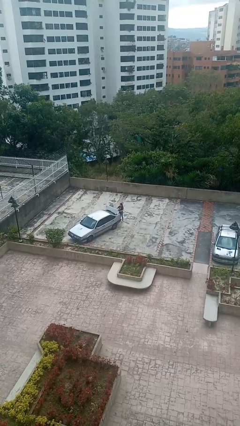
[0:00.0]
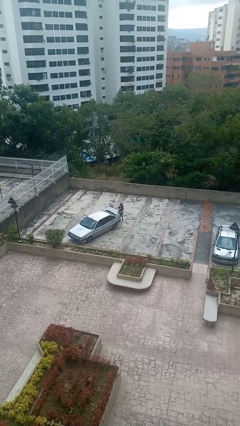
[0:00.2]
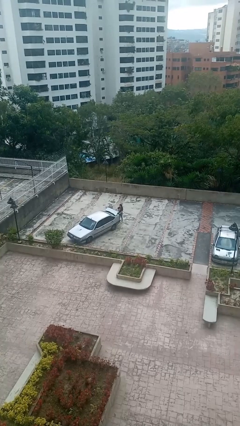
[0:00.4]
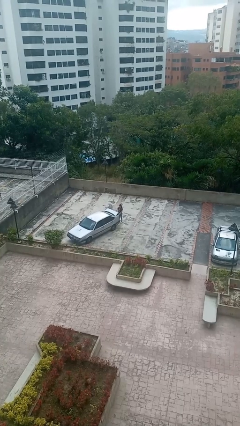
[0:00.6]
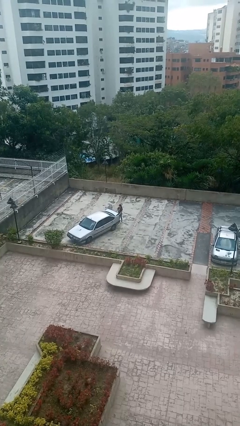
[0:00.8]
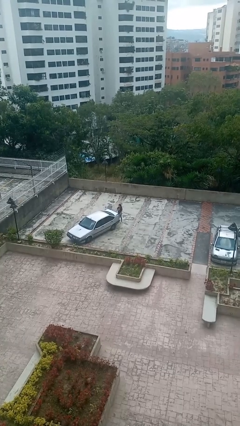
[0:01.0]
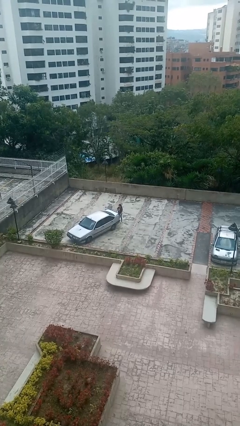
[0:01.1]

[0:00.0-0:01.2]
person closes car trunk

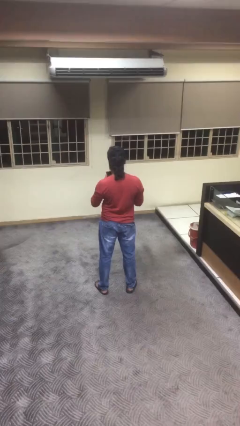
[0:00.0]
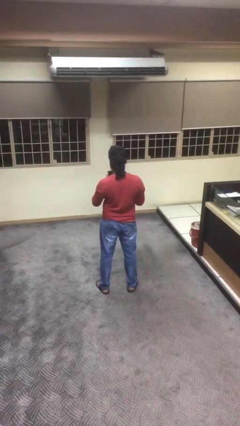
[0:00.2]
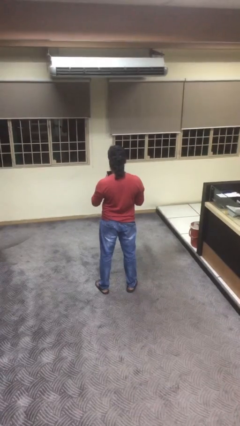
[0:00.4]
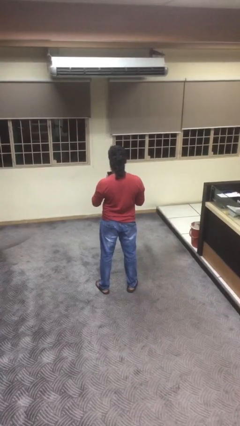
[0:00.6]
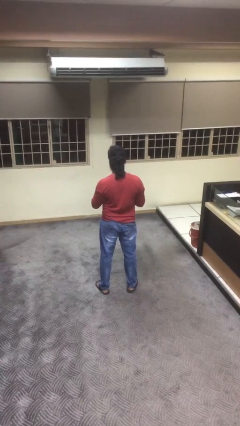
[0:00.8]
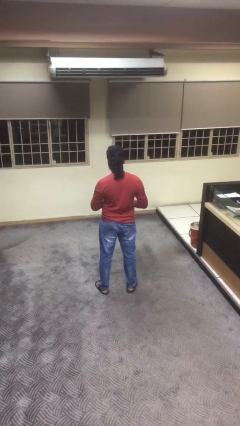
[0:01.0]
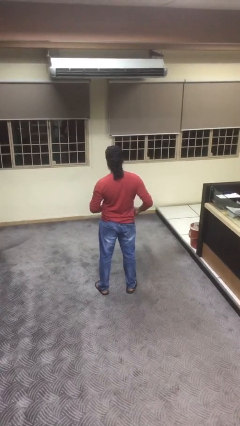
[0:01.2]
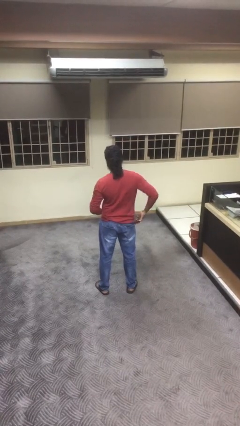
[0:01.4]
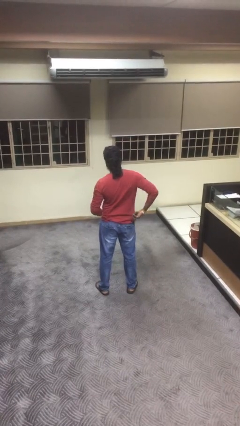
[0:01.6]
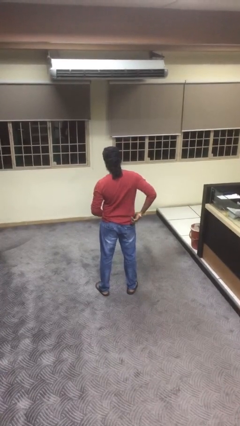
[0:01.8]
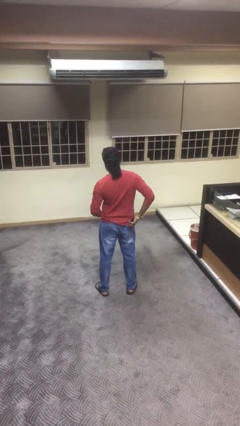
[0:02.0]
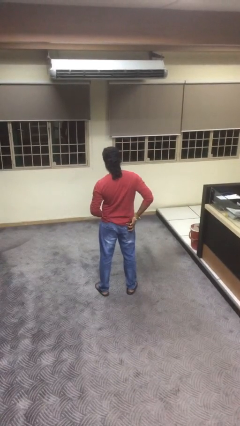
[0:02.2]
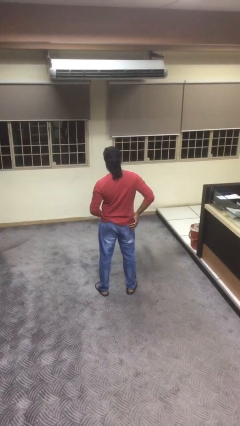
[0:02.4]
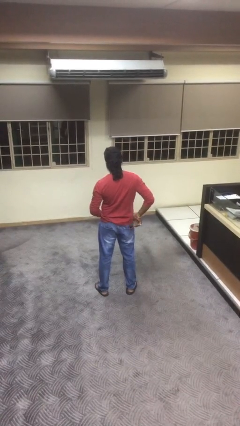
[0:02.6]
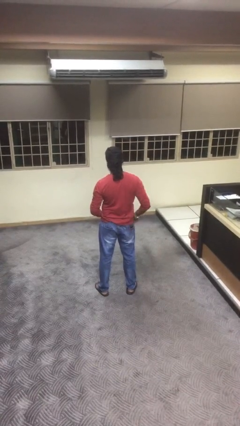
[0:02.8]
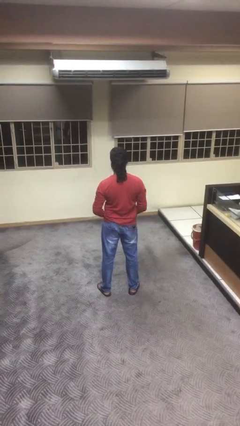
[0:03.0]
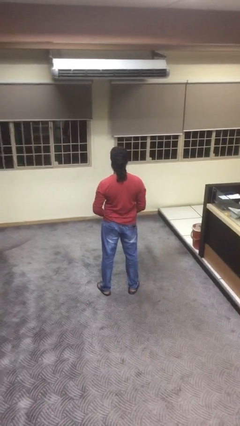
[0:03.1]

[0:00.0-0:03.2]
person puts phone into pocket

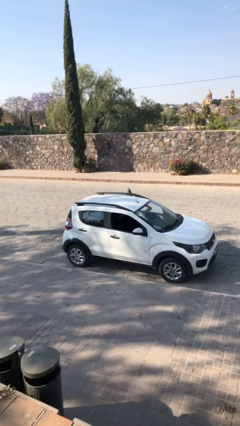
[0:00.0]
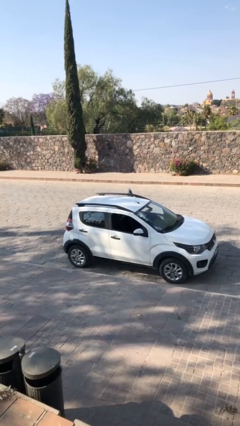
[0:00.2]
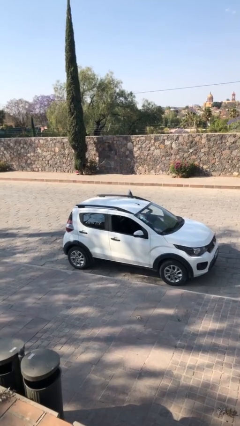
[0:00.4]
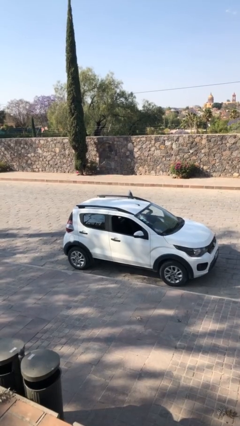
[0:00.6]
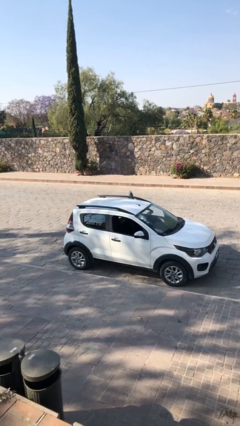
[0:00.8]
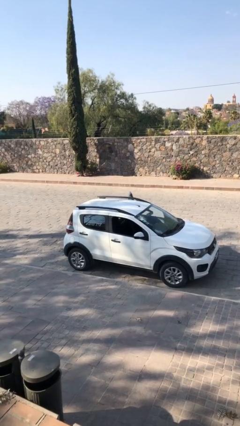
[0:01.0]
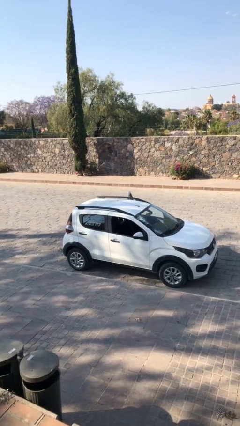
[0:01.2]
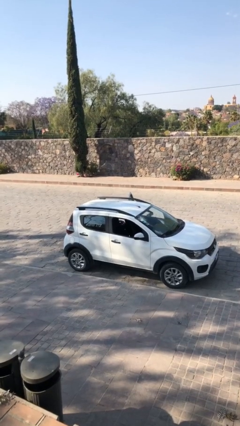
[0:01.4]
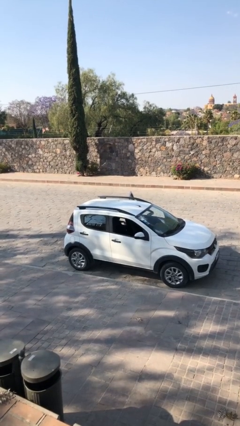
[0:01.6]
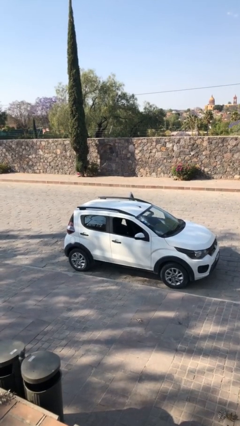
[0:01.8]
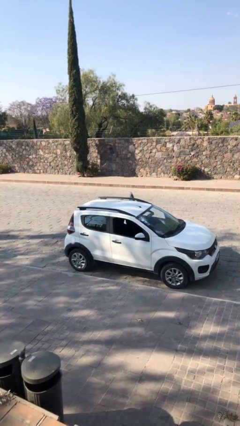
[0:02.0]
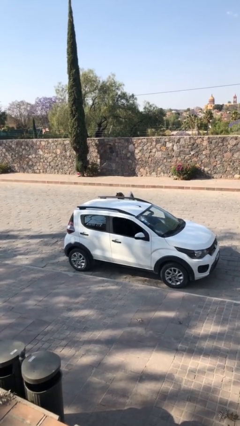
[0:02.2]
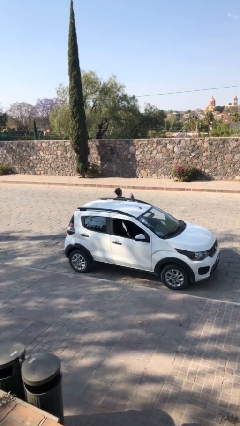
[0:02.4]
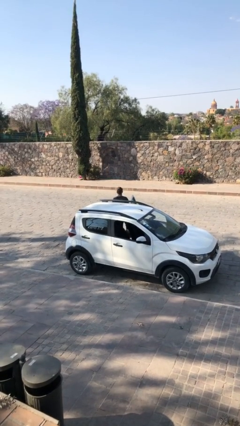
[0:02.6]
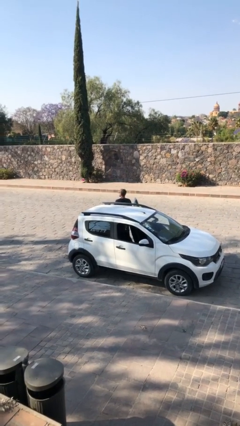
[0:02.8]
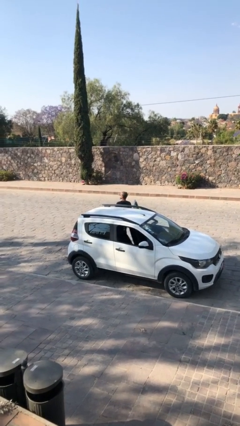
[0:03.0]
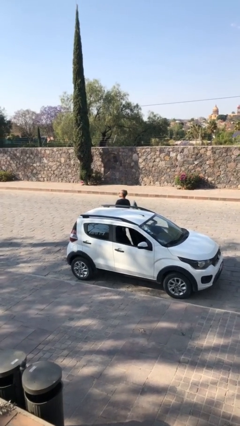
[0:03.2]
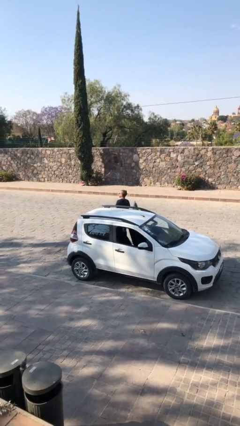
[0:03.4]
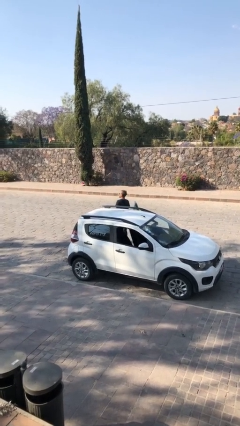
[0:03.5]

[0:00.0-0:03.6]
person exits car

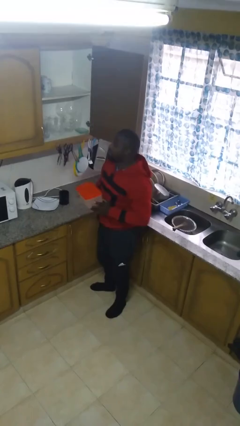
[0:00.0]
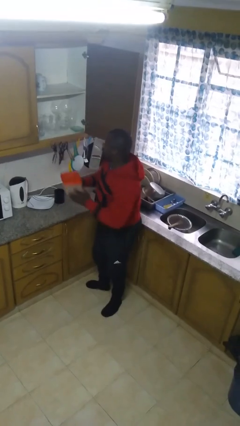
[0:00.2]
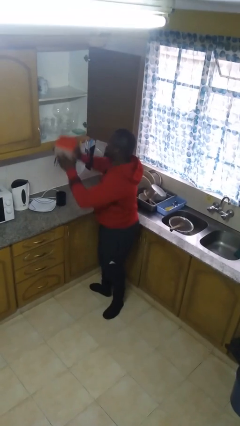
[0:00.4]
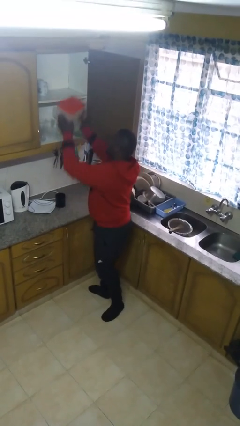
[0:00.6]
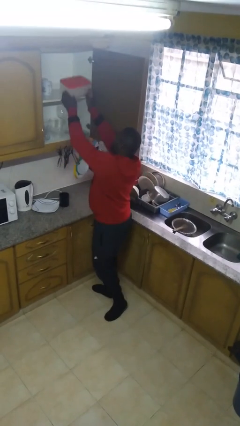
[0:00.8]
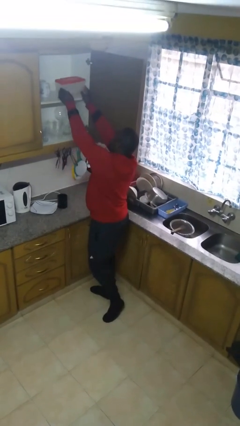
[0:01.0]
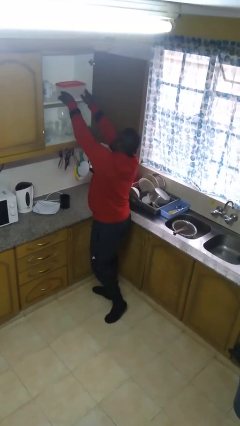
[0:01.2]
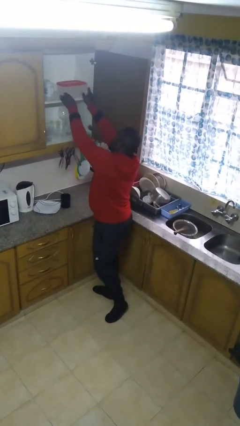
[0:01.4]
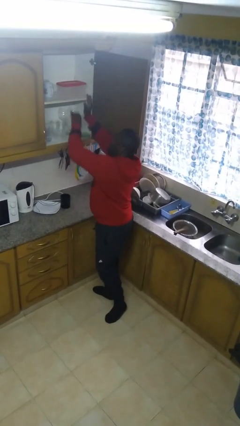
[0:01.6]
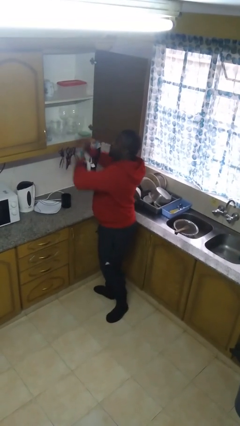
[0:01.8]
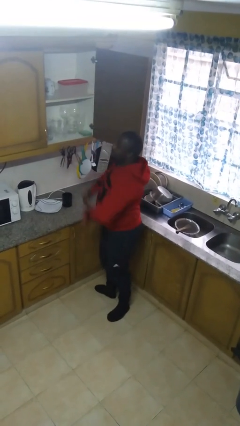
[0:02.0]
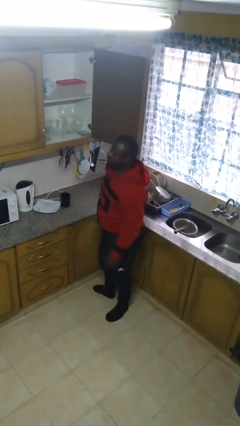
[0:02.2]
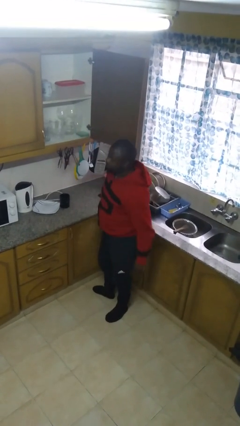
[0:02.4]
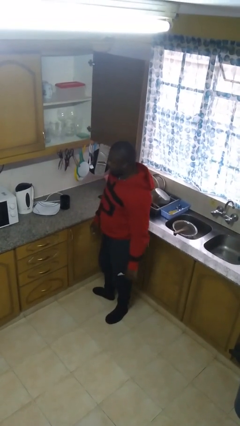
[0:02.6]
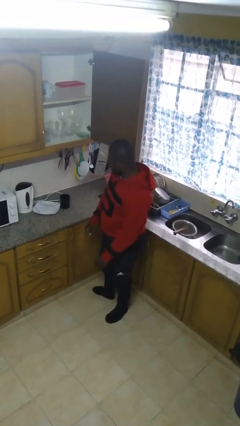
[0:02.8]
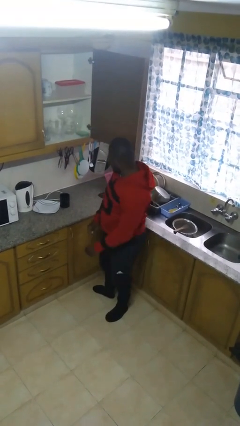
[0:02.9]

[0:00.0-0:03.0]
person puts down object into cabinet

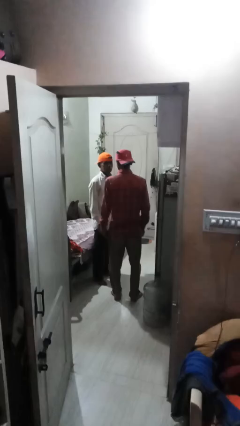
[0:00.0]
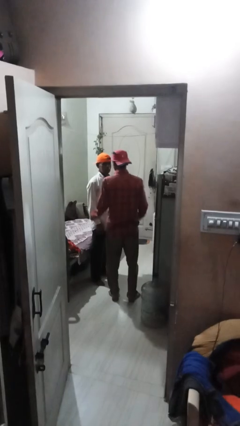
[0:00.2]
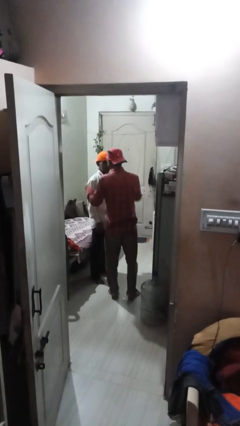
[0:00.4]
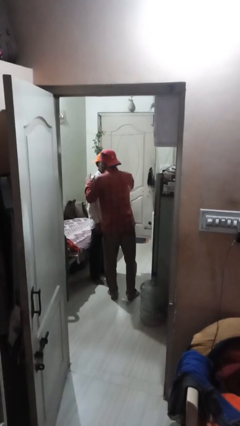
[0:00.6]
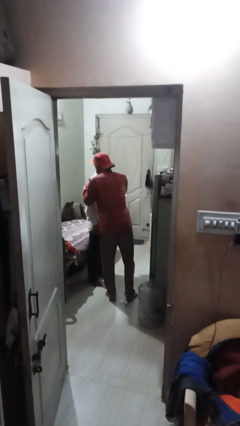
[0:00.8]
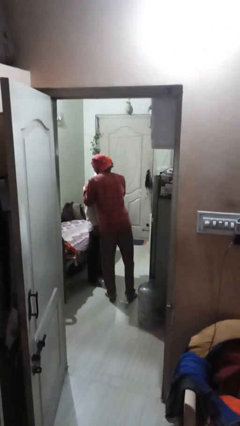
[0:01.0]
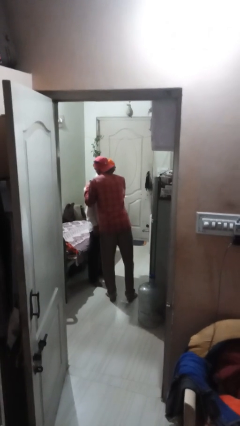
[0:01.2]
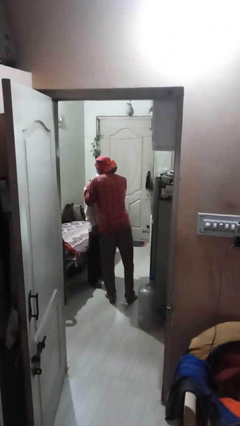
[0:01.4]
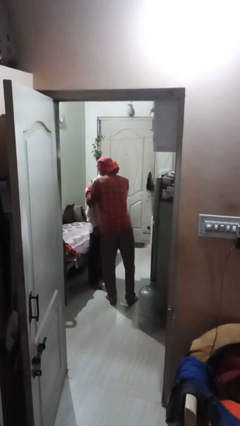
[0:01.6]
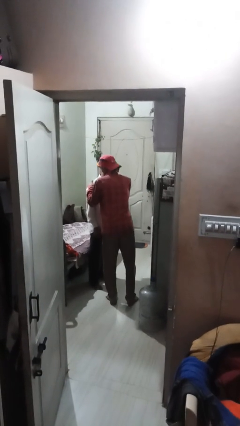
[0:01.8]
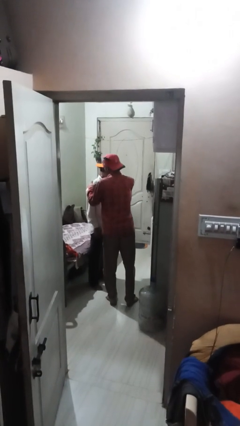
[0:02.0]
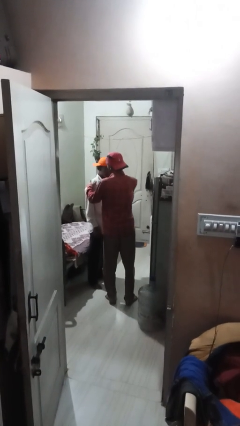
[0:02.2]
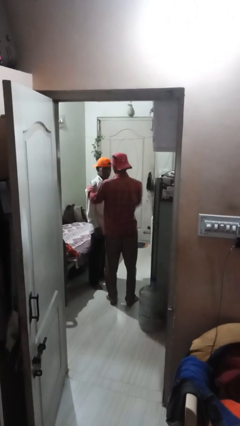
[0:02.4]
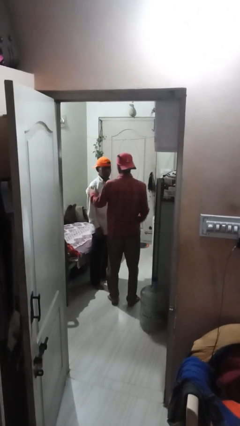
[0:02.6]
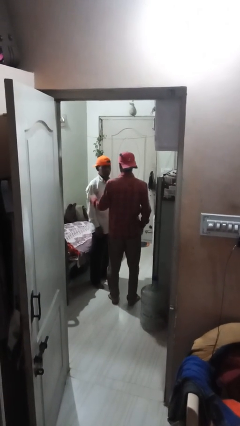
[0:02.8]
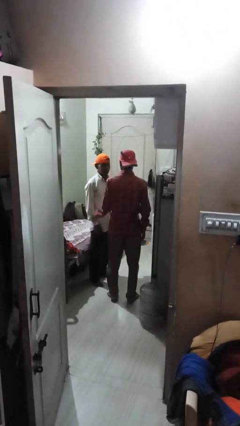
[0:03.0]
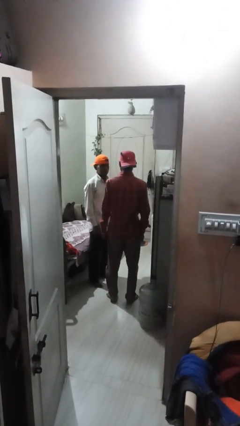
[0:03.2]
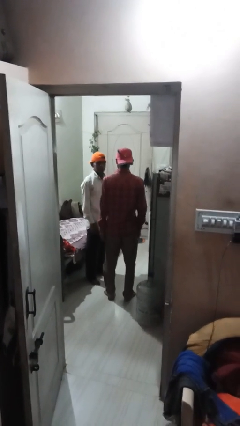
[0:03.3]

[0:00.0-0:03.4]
person kisses cheek of person

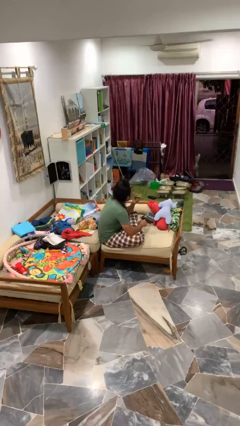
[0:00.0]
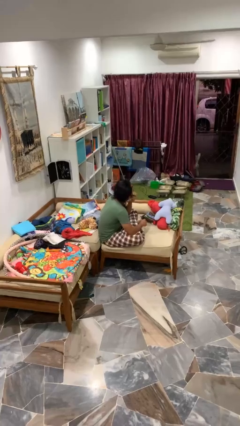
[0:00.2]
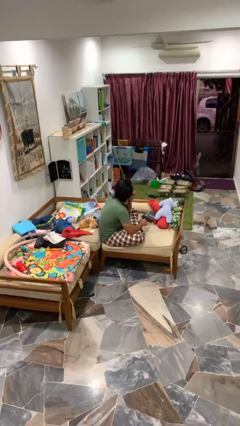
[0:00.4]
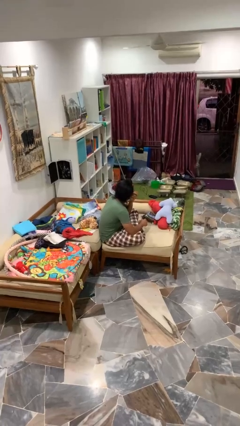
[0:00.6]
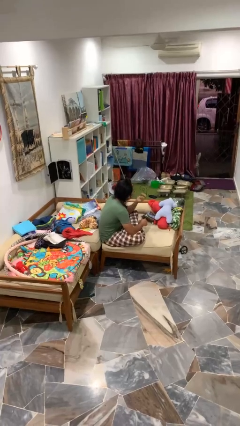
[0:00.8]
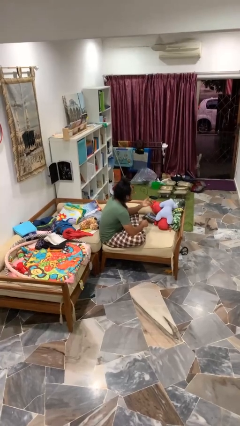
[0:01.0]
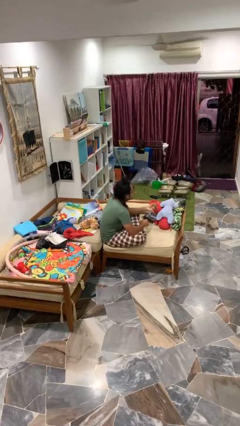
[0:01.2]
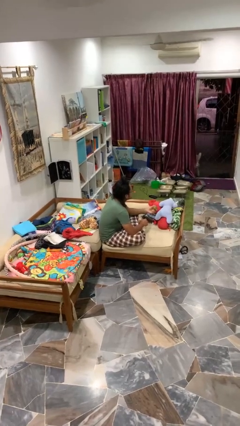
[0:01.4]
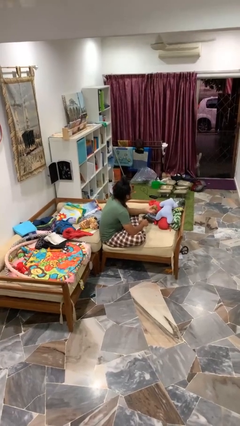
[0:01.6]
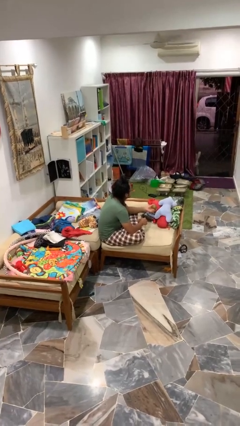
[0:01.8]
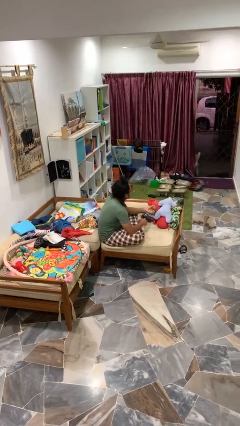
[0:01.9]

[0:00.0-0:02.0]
person eats apple

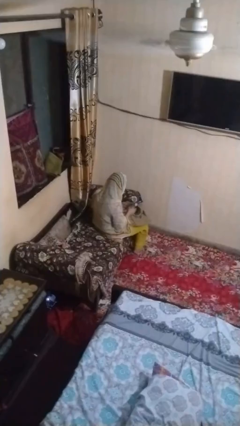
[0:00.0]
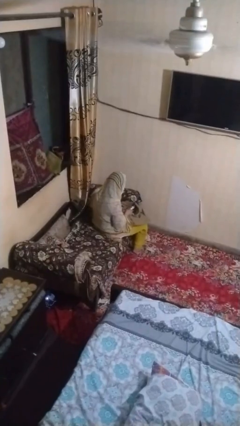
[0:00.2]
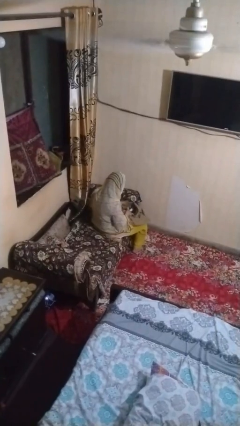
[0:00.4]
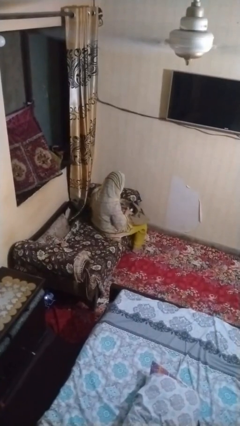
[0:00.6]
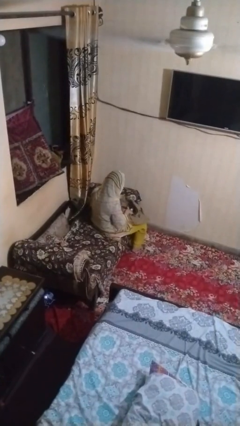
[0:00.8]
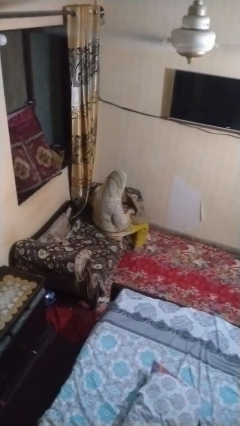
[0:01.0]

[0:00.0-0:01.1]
person puts object into bag
